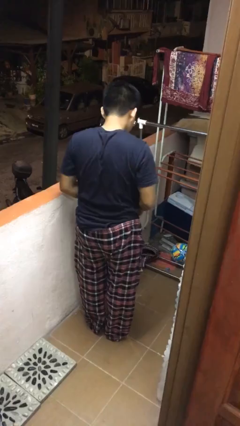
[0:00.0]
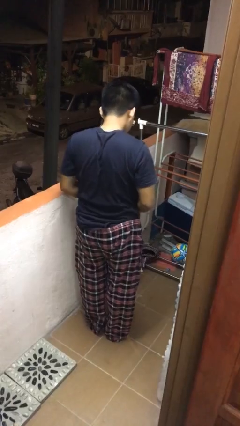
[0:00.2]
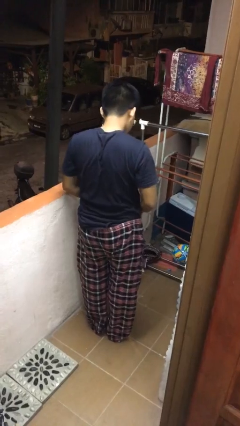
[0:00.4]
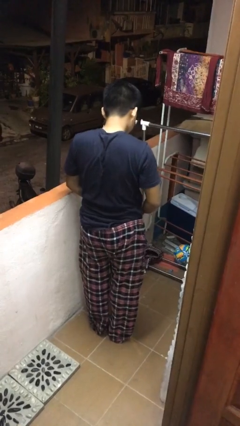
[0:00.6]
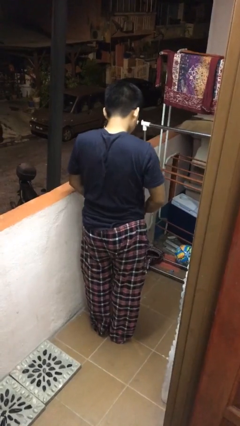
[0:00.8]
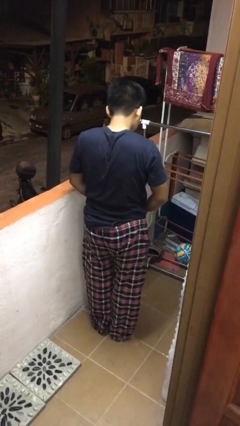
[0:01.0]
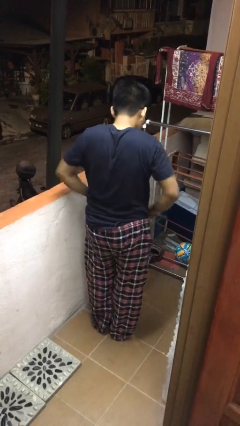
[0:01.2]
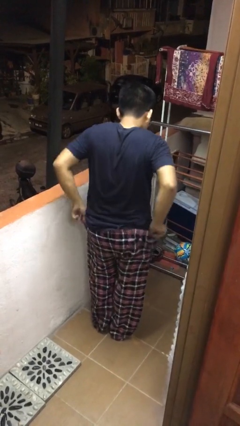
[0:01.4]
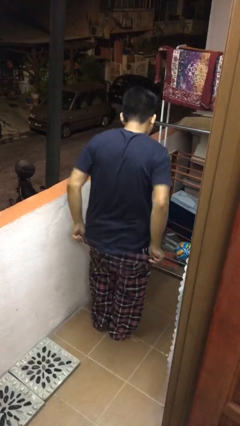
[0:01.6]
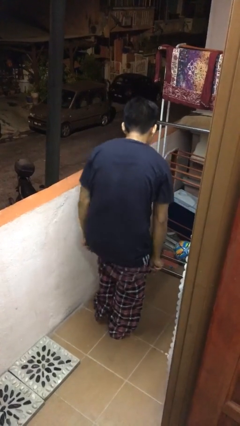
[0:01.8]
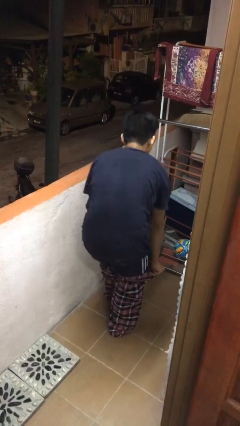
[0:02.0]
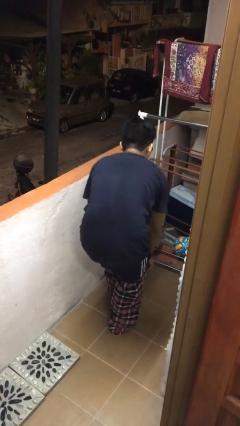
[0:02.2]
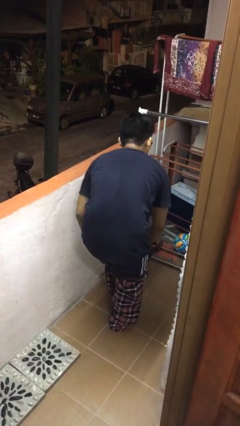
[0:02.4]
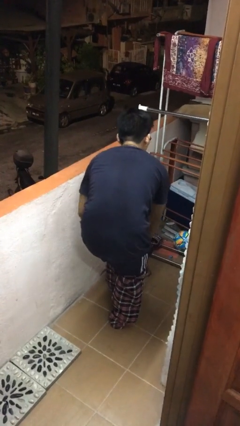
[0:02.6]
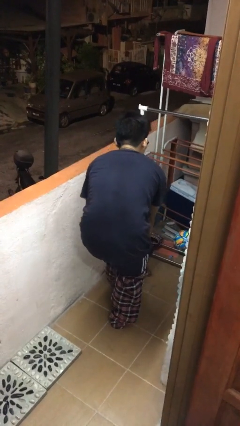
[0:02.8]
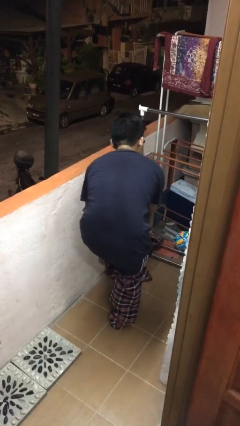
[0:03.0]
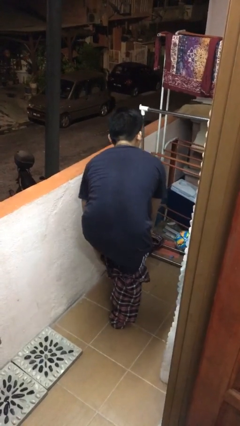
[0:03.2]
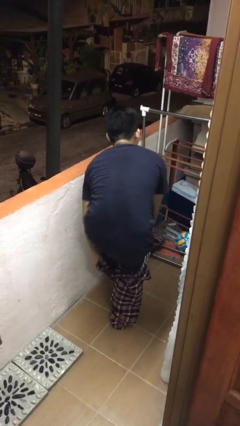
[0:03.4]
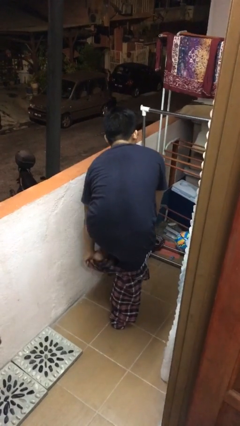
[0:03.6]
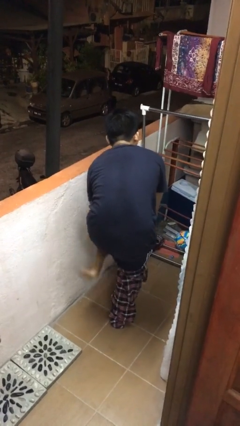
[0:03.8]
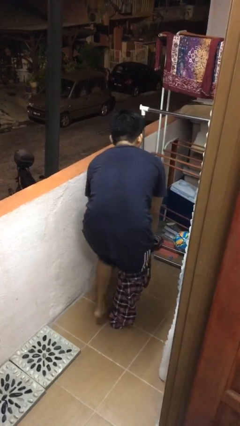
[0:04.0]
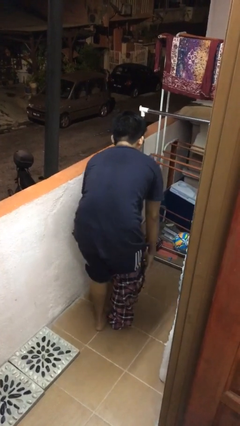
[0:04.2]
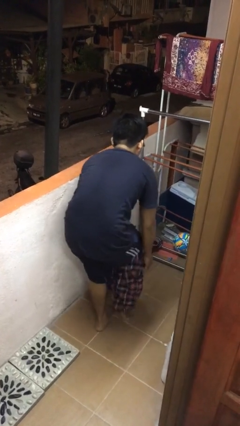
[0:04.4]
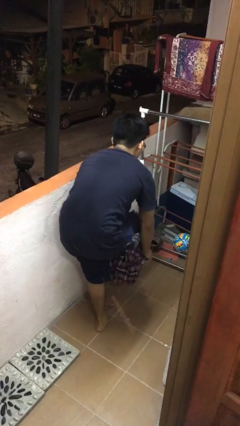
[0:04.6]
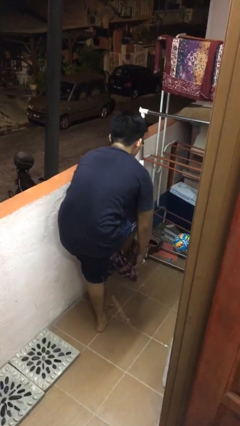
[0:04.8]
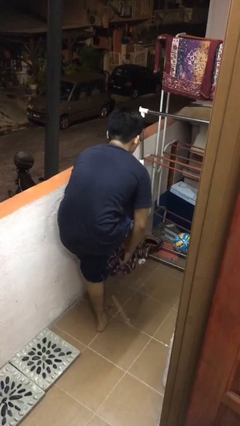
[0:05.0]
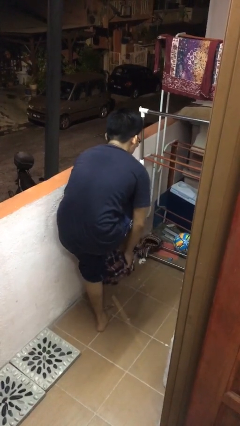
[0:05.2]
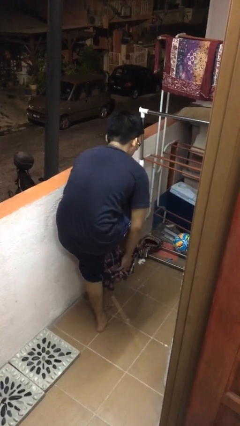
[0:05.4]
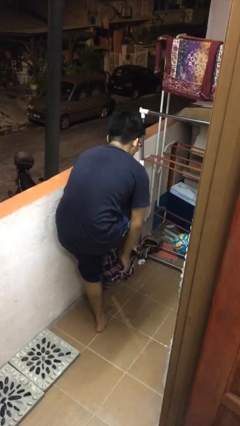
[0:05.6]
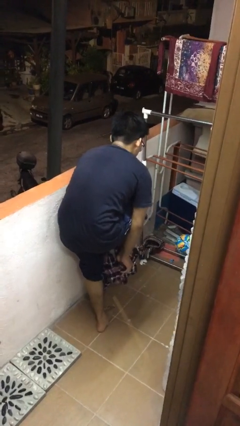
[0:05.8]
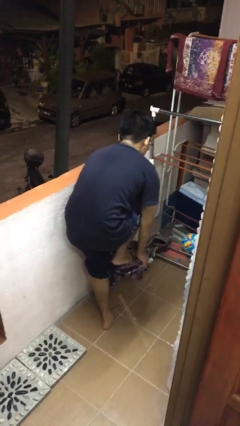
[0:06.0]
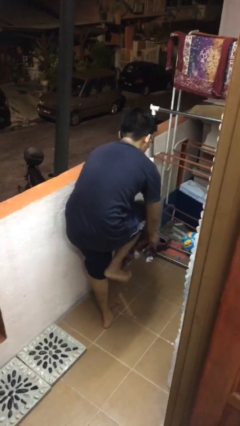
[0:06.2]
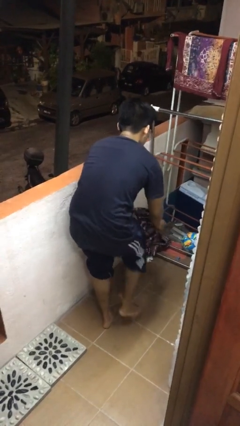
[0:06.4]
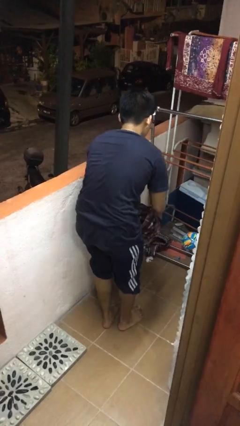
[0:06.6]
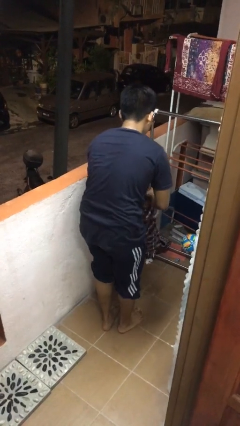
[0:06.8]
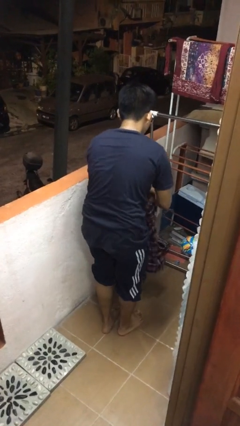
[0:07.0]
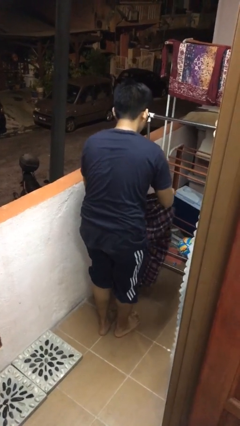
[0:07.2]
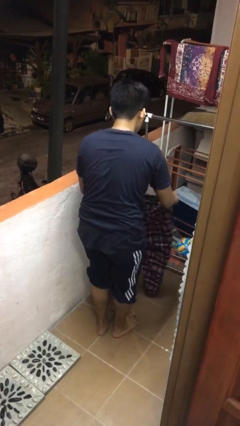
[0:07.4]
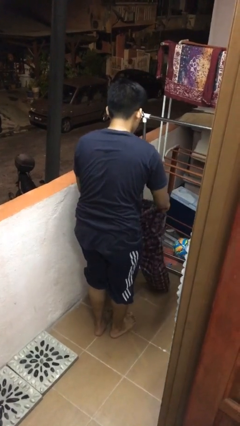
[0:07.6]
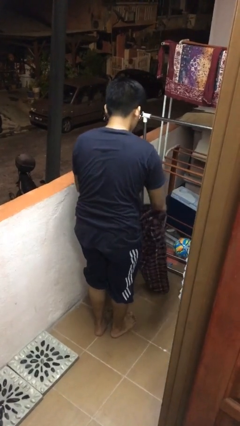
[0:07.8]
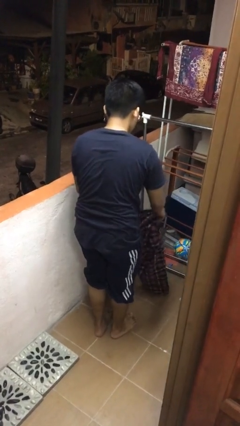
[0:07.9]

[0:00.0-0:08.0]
person takes off pants

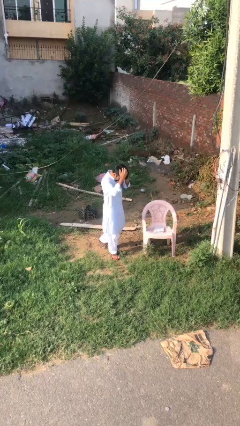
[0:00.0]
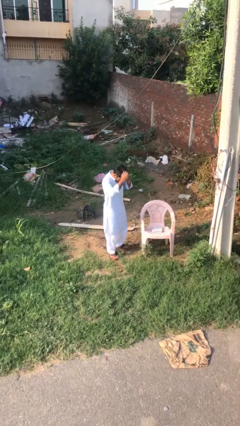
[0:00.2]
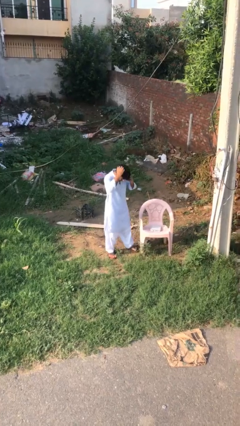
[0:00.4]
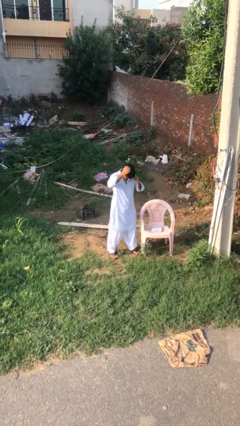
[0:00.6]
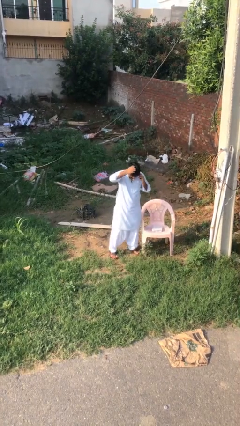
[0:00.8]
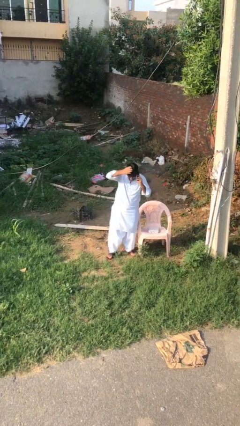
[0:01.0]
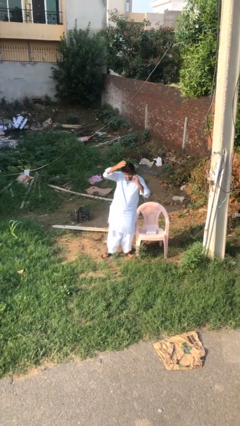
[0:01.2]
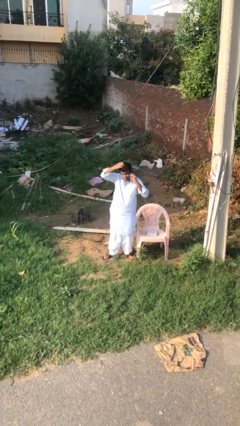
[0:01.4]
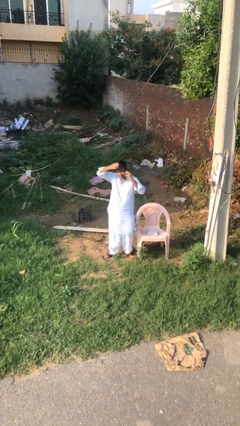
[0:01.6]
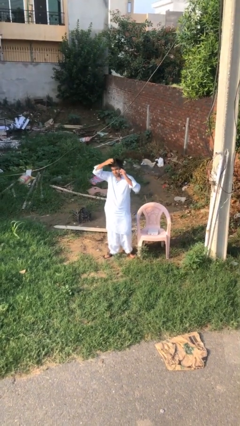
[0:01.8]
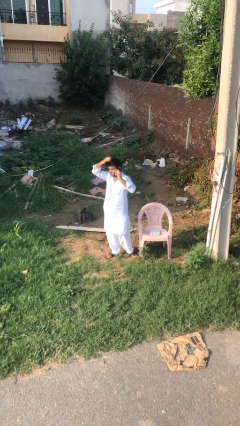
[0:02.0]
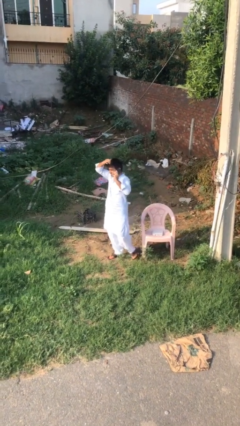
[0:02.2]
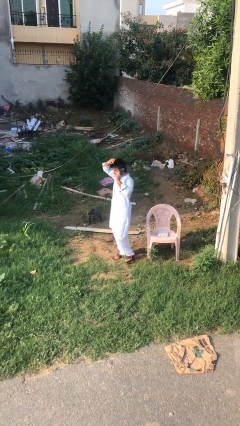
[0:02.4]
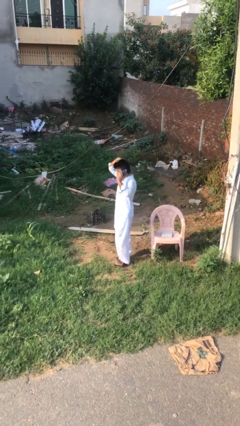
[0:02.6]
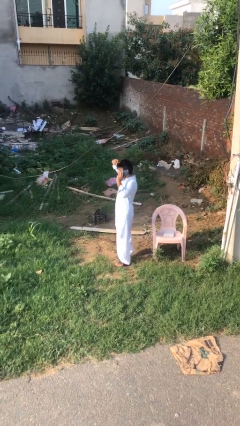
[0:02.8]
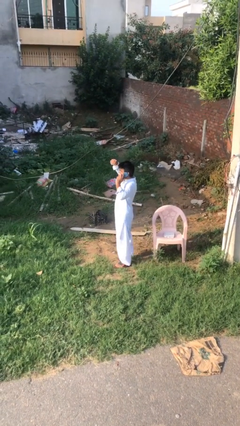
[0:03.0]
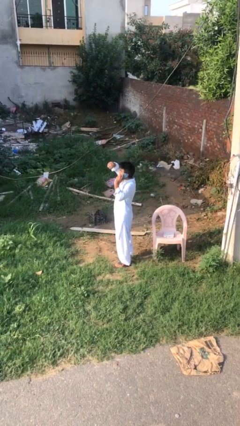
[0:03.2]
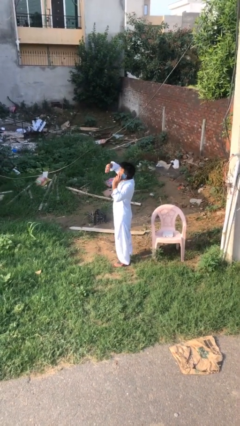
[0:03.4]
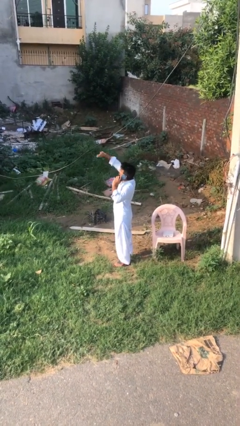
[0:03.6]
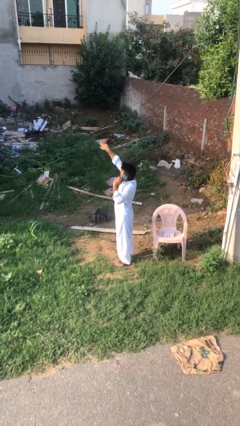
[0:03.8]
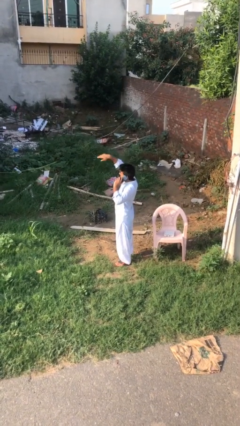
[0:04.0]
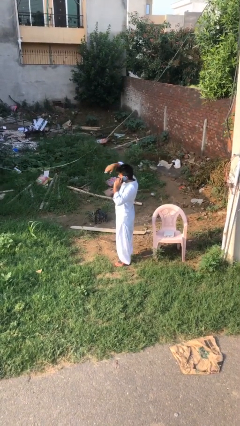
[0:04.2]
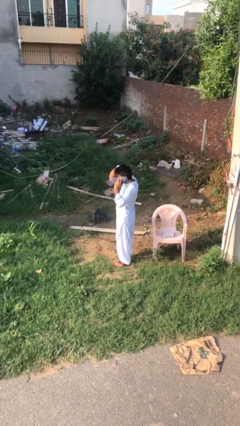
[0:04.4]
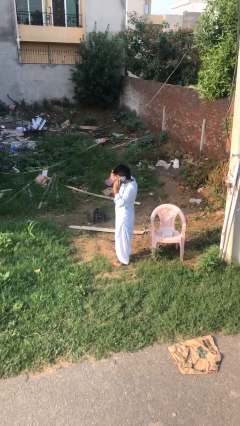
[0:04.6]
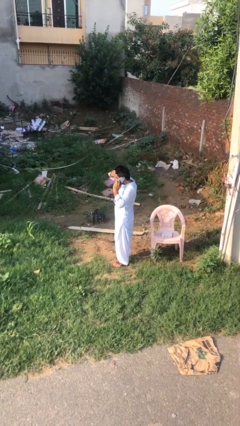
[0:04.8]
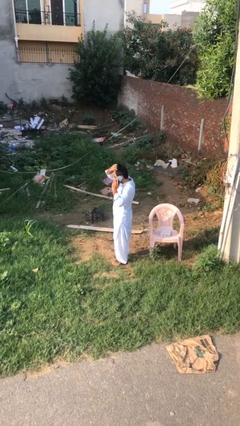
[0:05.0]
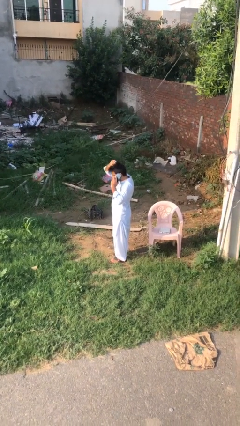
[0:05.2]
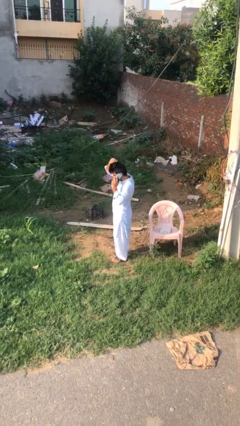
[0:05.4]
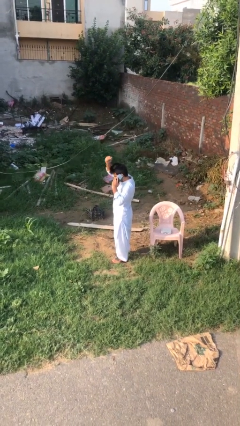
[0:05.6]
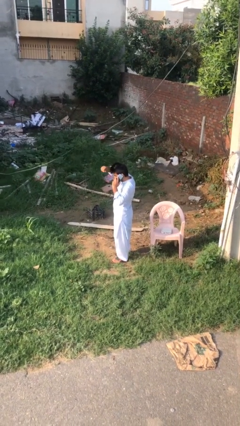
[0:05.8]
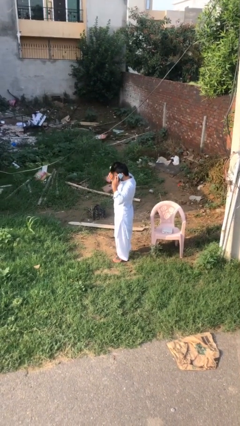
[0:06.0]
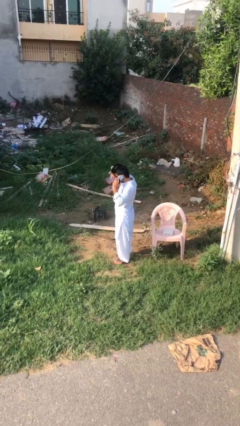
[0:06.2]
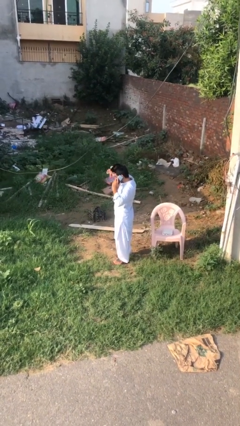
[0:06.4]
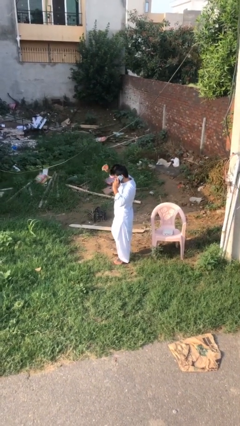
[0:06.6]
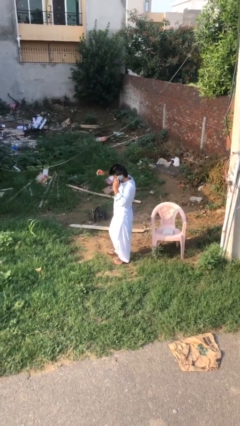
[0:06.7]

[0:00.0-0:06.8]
person talks on phone

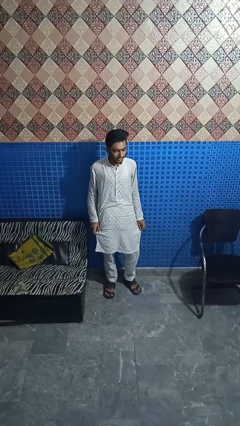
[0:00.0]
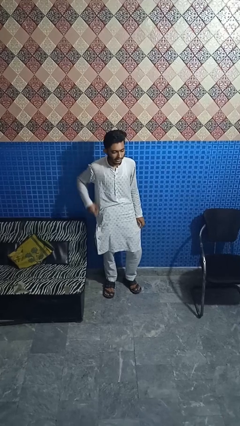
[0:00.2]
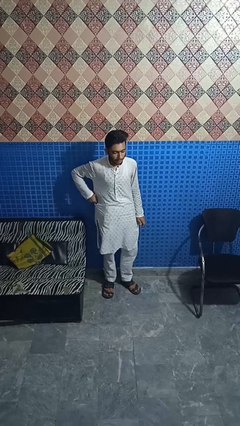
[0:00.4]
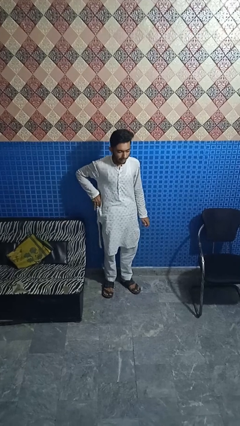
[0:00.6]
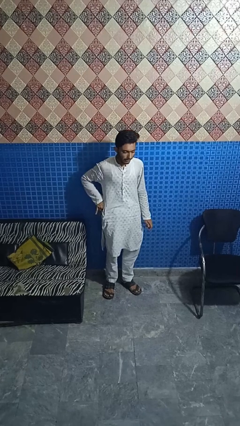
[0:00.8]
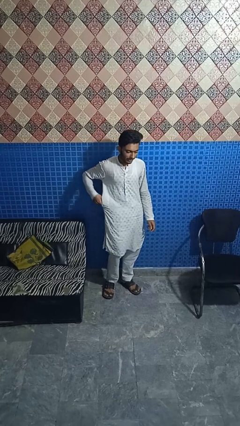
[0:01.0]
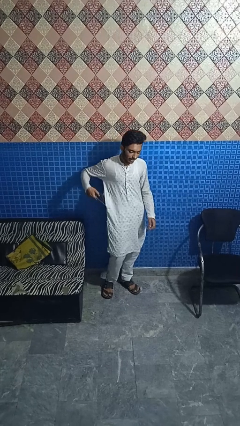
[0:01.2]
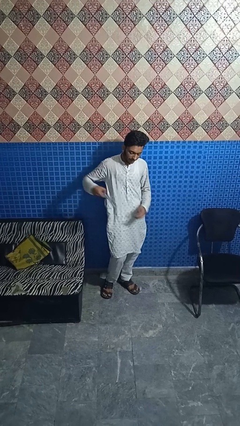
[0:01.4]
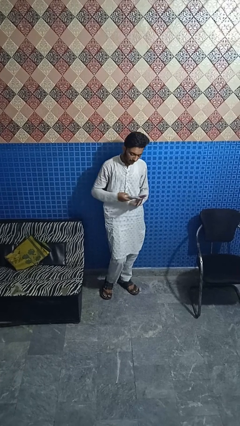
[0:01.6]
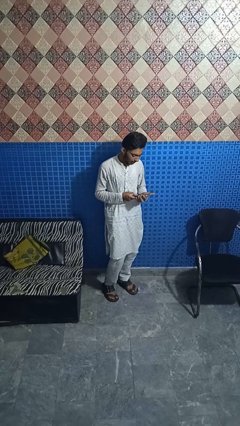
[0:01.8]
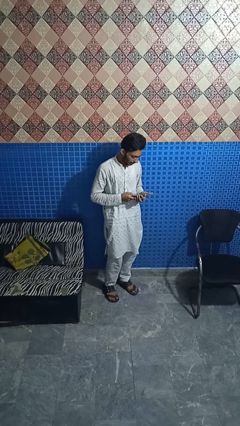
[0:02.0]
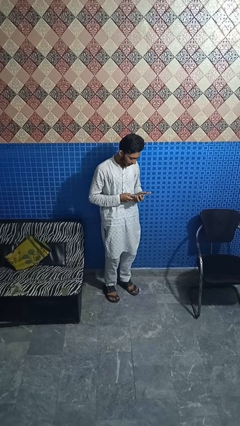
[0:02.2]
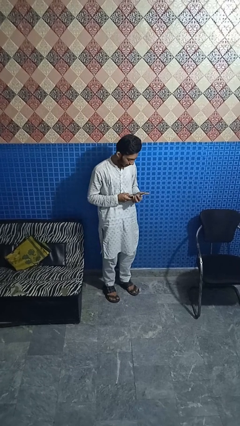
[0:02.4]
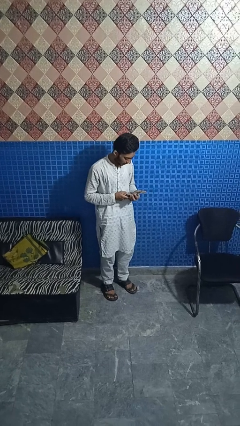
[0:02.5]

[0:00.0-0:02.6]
person takes phone from pocket
